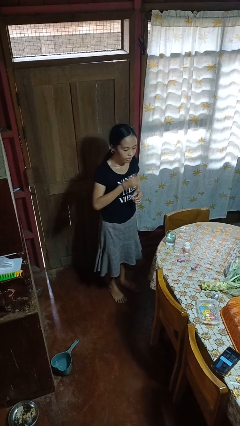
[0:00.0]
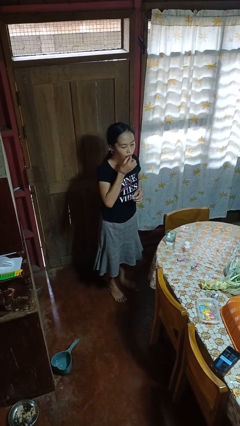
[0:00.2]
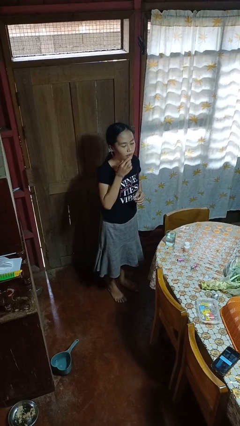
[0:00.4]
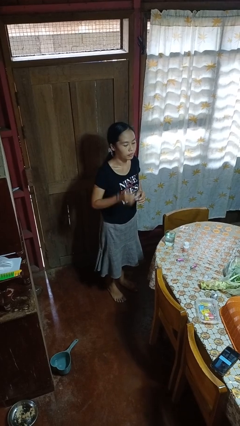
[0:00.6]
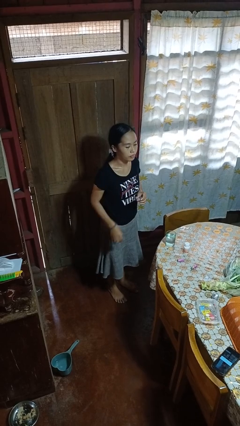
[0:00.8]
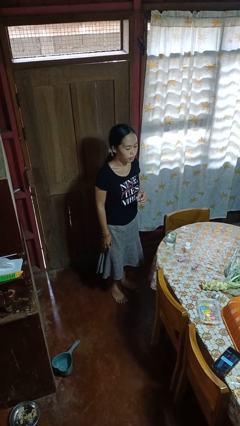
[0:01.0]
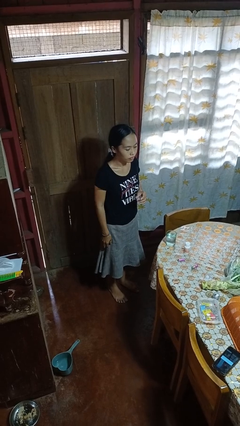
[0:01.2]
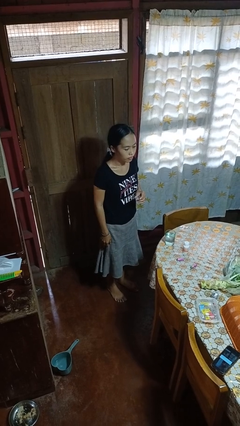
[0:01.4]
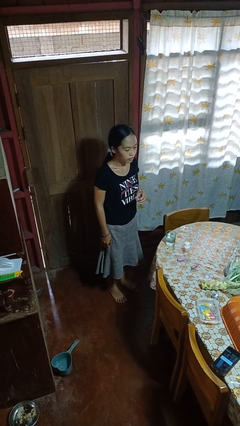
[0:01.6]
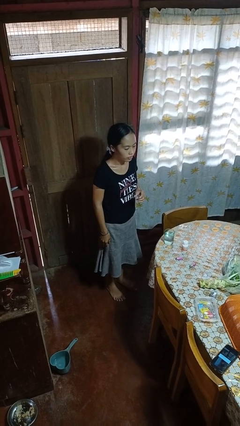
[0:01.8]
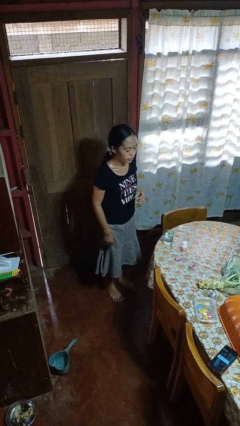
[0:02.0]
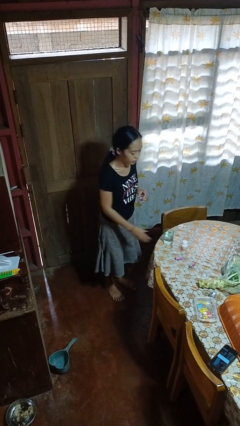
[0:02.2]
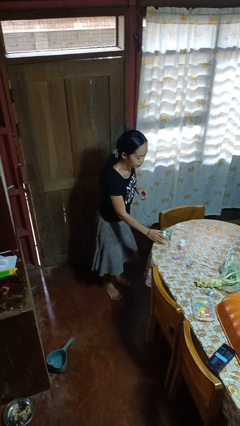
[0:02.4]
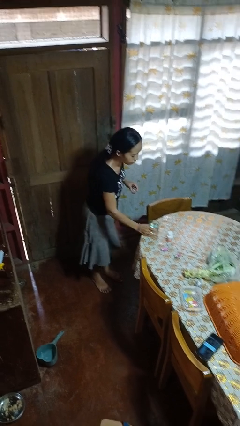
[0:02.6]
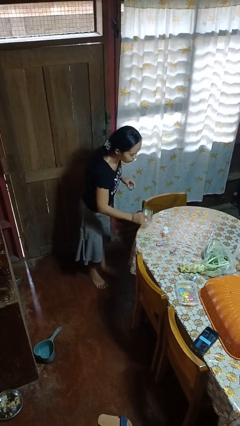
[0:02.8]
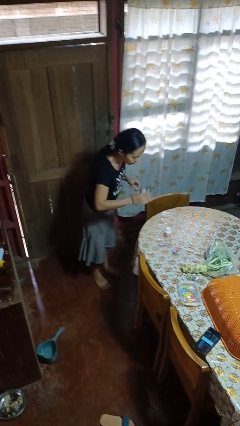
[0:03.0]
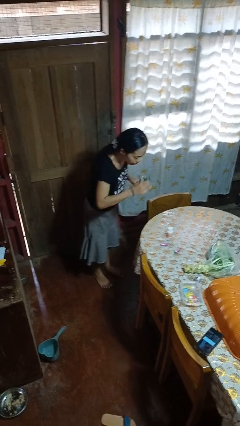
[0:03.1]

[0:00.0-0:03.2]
person takes medicine pills

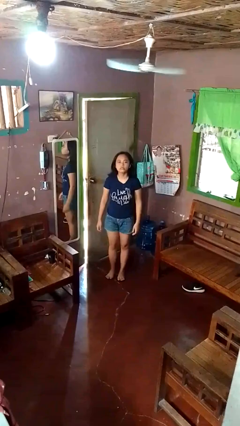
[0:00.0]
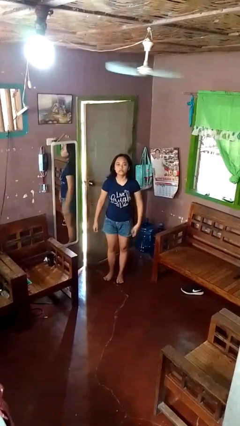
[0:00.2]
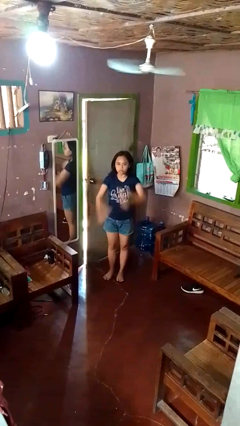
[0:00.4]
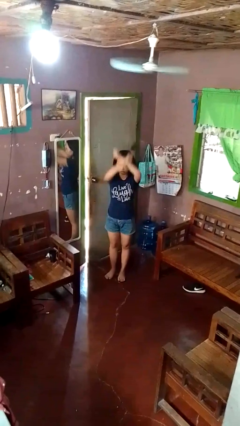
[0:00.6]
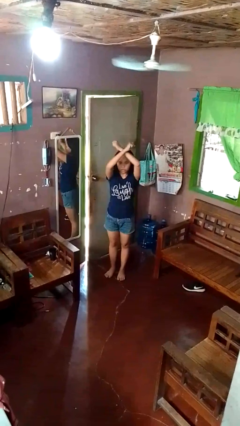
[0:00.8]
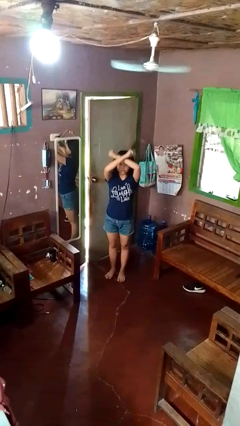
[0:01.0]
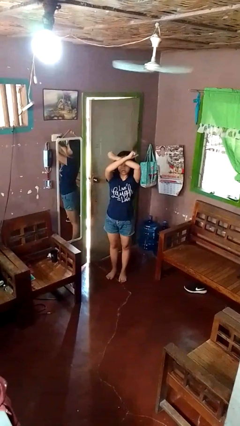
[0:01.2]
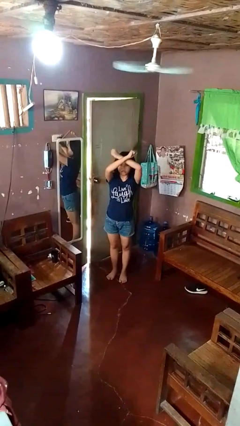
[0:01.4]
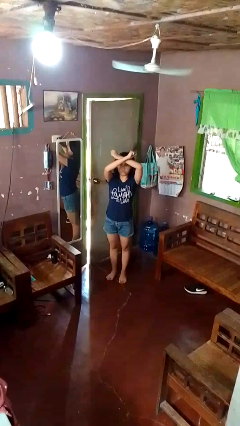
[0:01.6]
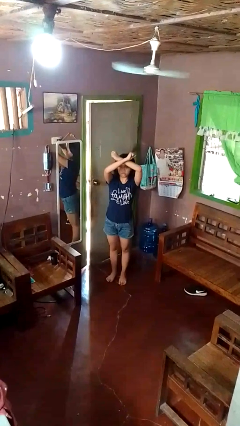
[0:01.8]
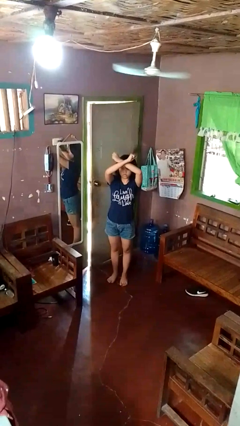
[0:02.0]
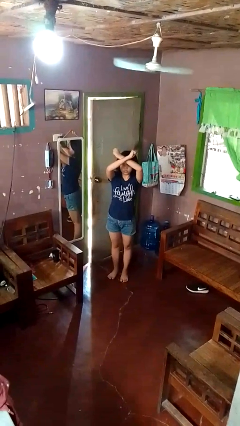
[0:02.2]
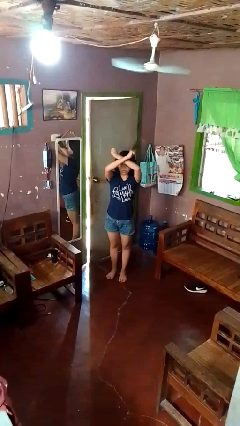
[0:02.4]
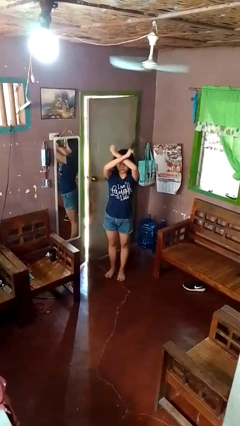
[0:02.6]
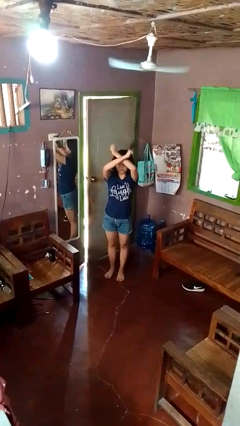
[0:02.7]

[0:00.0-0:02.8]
person gestures arms x

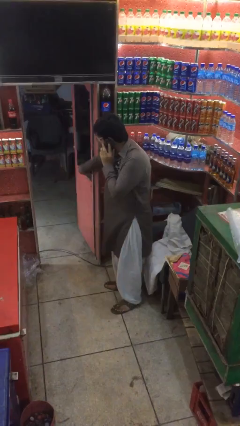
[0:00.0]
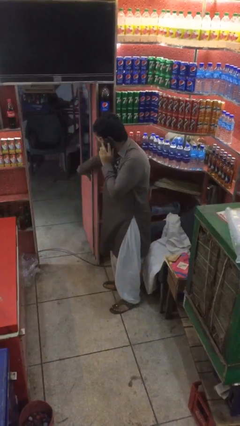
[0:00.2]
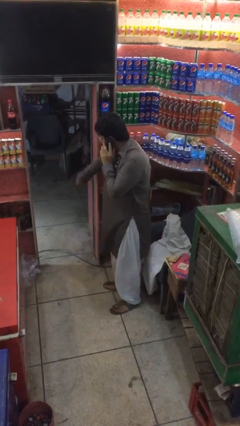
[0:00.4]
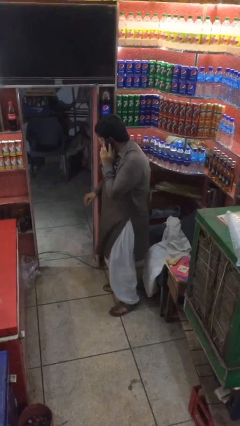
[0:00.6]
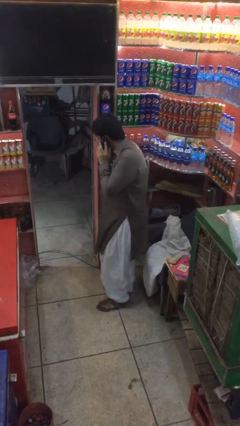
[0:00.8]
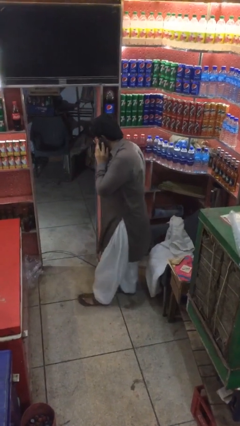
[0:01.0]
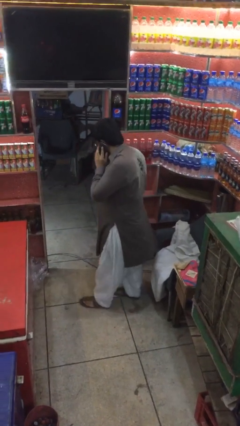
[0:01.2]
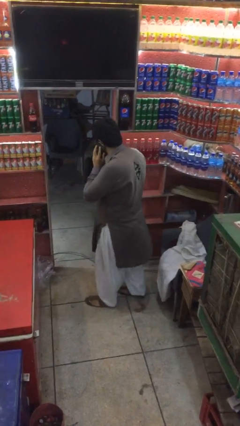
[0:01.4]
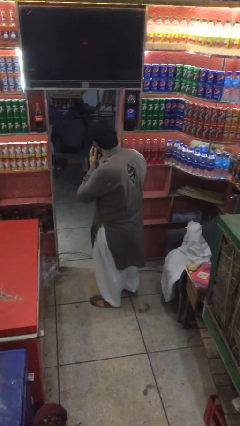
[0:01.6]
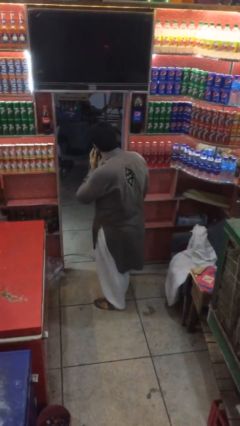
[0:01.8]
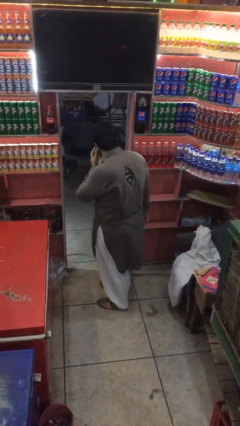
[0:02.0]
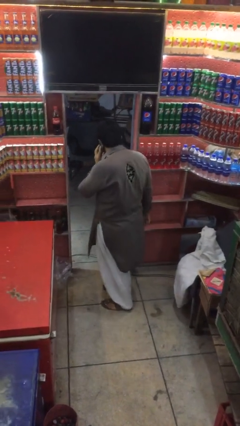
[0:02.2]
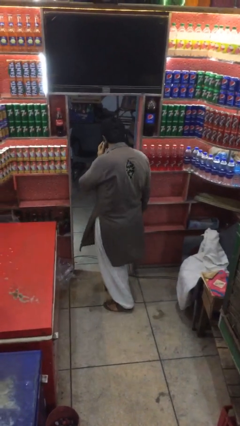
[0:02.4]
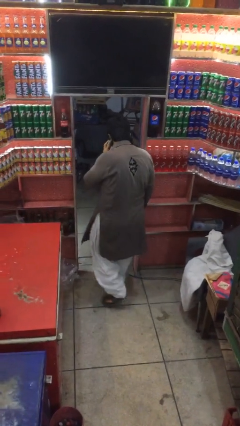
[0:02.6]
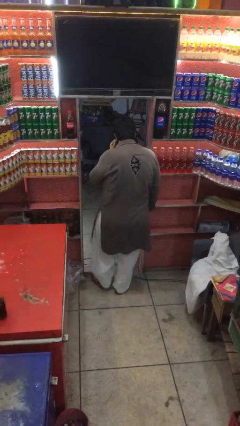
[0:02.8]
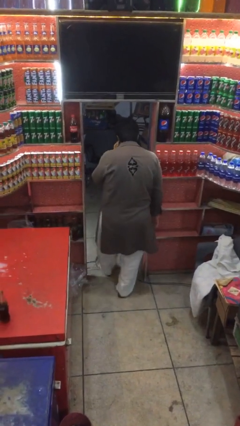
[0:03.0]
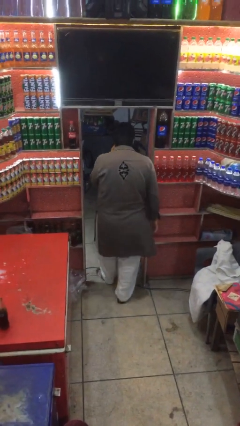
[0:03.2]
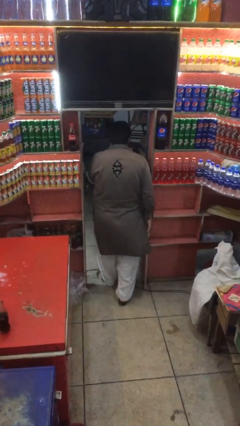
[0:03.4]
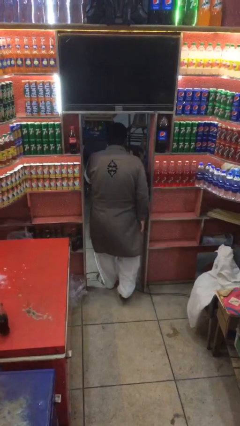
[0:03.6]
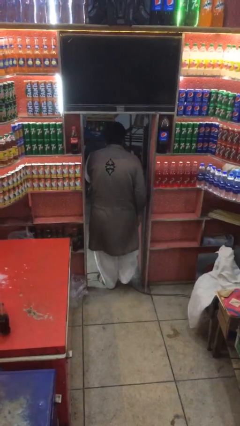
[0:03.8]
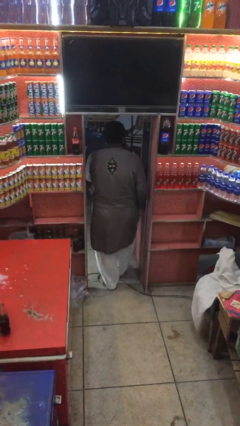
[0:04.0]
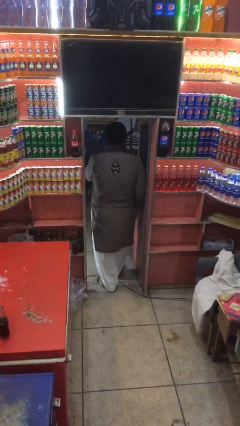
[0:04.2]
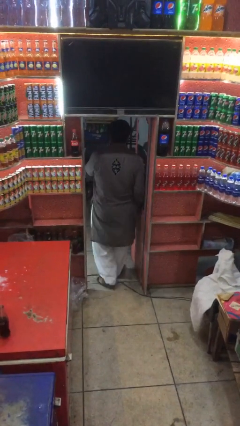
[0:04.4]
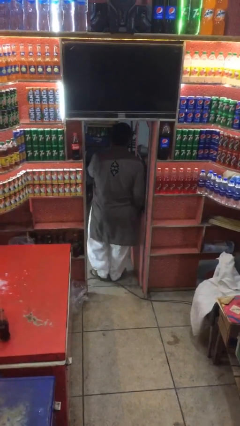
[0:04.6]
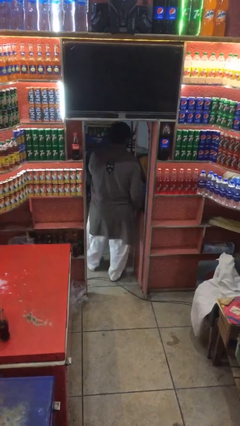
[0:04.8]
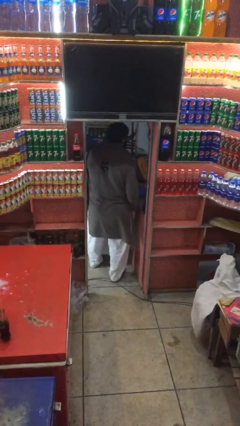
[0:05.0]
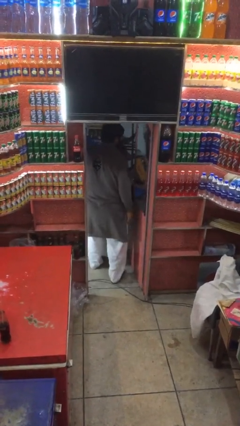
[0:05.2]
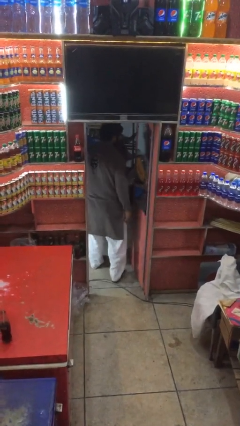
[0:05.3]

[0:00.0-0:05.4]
person exits scene through structure

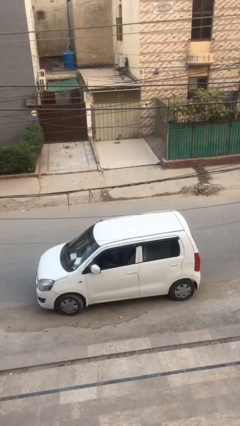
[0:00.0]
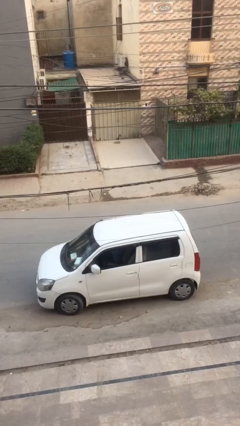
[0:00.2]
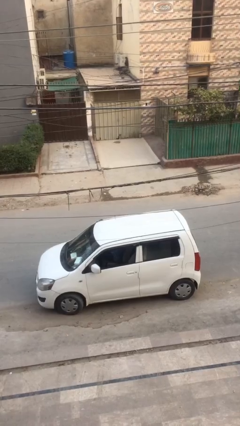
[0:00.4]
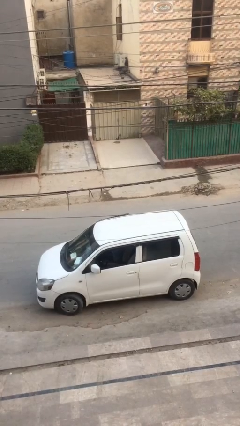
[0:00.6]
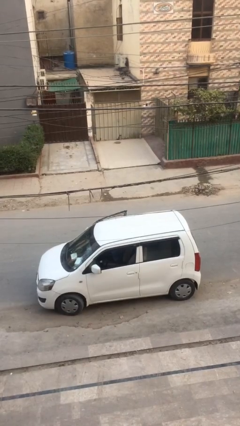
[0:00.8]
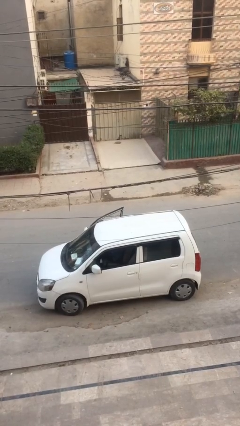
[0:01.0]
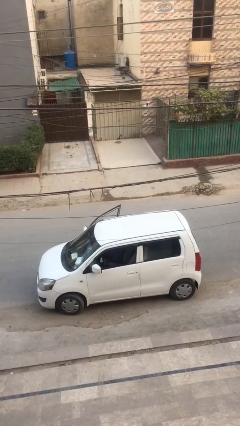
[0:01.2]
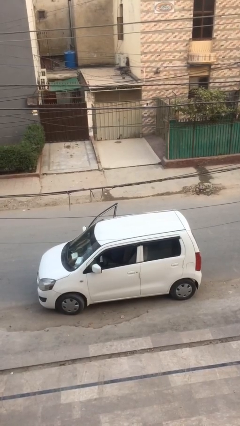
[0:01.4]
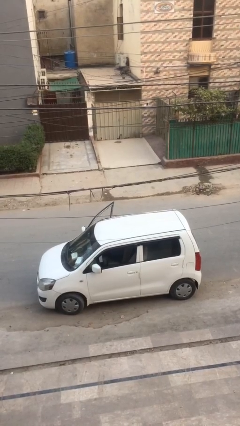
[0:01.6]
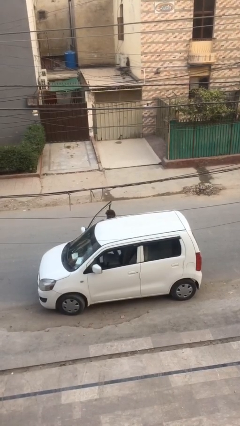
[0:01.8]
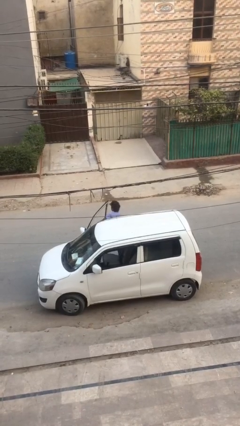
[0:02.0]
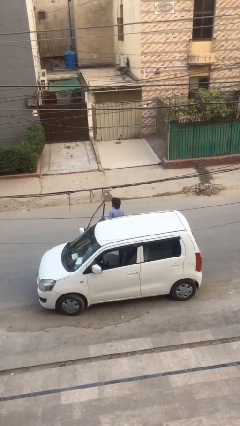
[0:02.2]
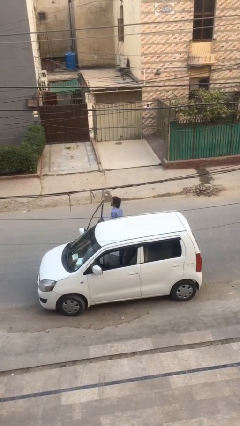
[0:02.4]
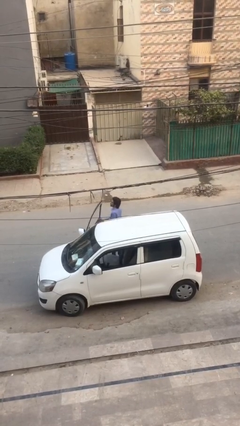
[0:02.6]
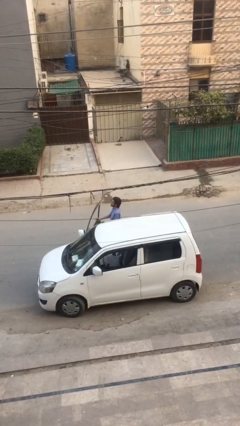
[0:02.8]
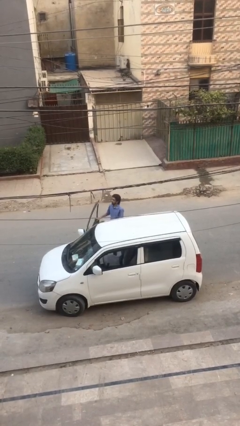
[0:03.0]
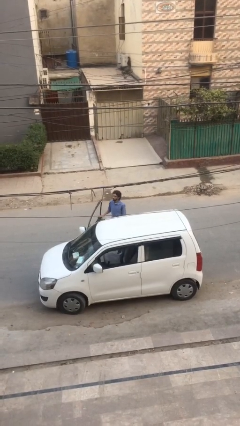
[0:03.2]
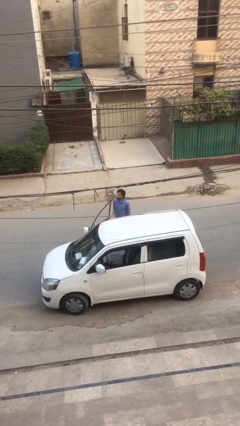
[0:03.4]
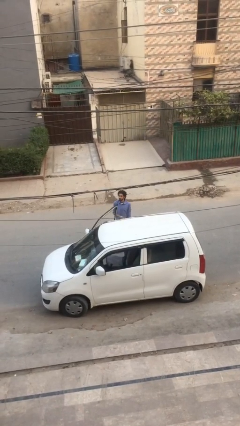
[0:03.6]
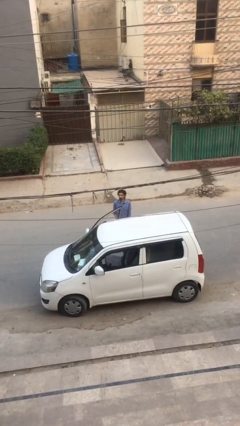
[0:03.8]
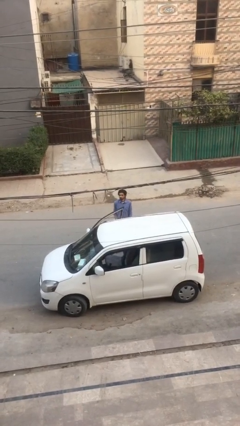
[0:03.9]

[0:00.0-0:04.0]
person exits car

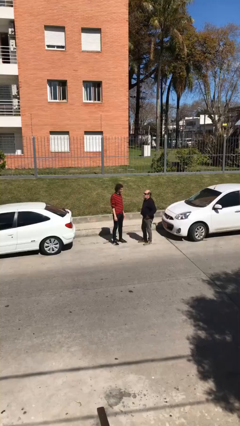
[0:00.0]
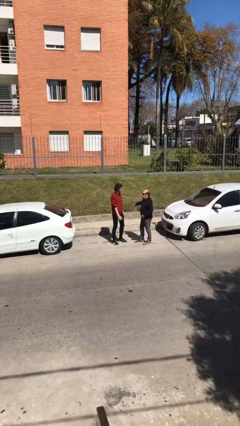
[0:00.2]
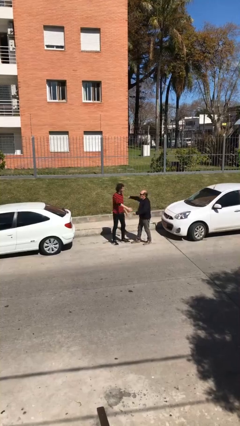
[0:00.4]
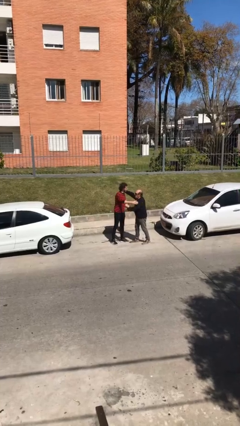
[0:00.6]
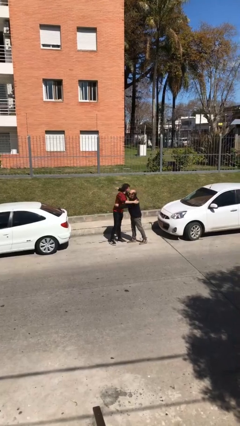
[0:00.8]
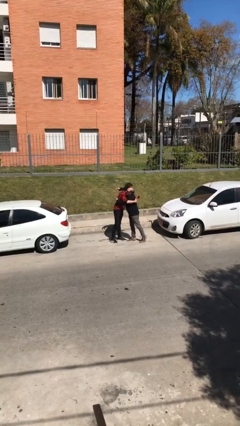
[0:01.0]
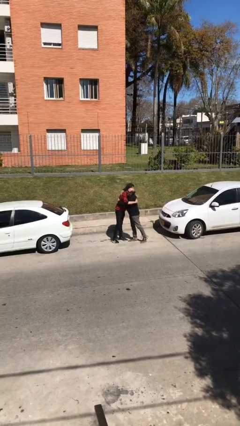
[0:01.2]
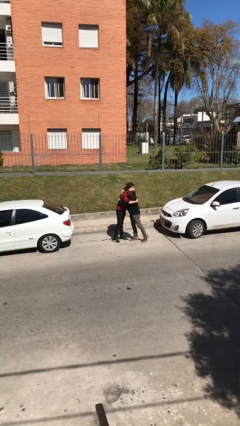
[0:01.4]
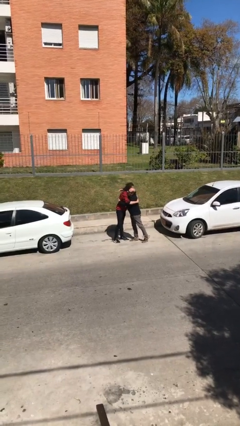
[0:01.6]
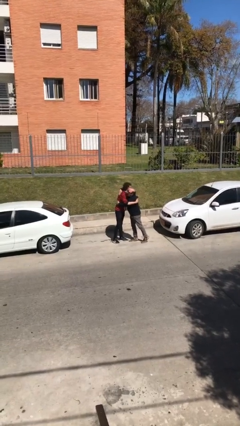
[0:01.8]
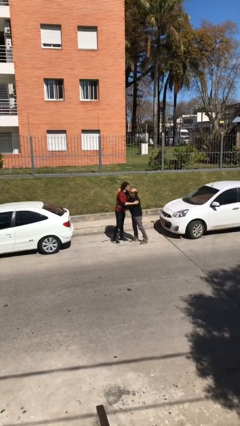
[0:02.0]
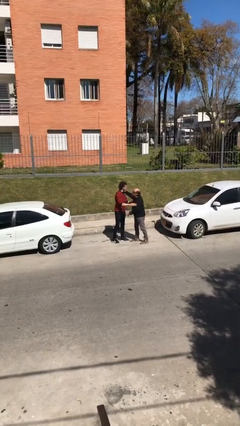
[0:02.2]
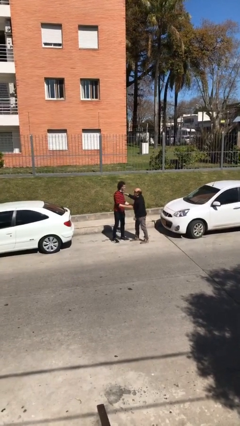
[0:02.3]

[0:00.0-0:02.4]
person embraces person
